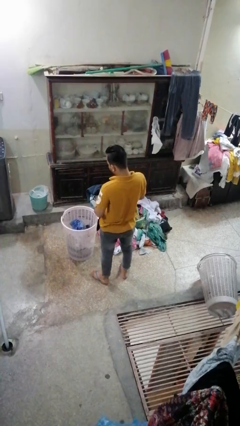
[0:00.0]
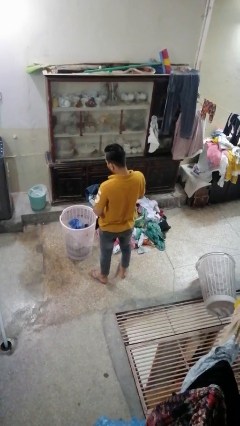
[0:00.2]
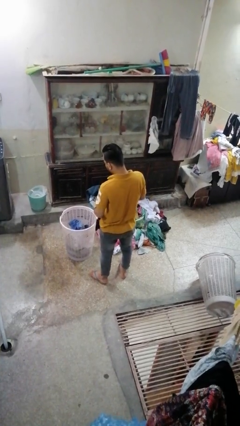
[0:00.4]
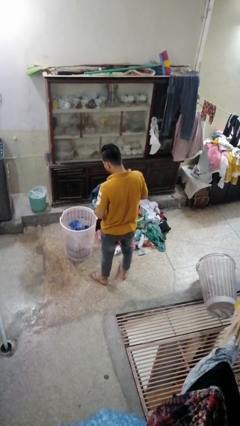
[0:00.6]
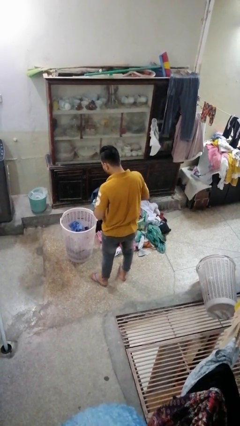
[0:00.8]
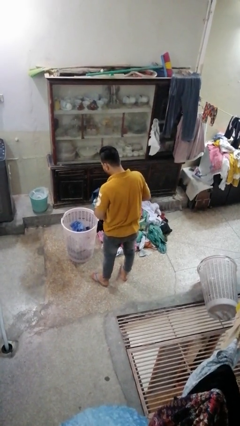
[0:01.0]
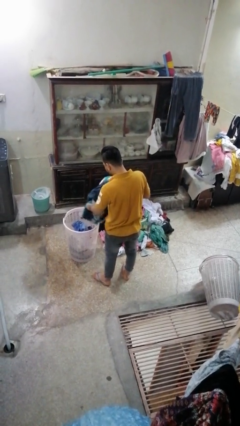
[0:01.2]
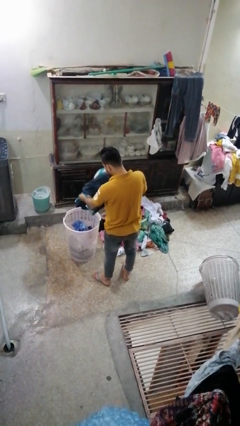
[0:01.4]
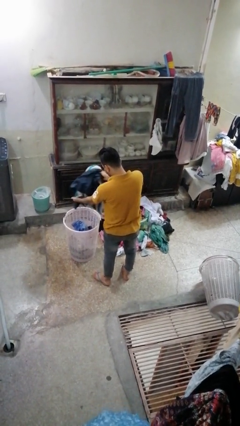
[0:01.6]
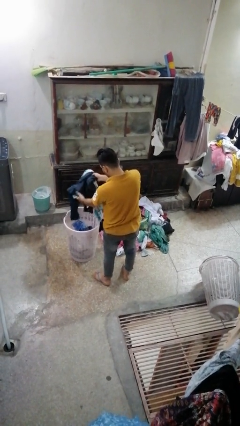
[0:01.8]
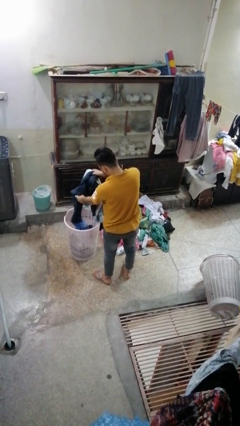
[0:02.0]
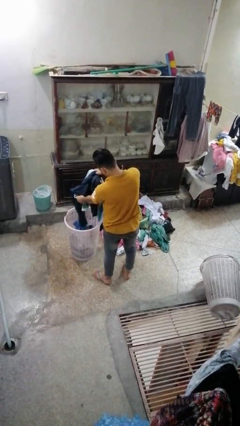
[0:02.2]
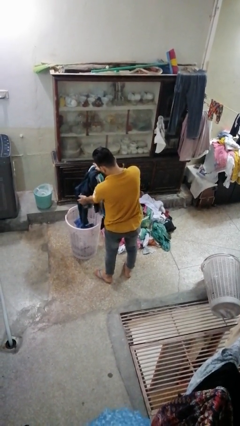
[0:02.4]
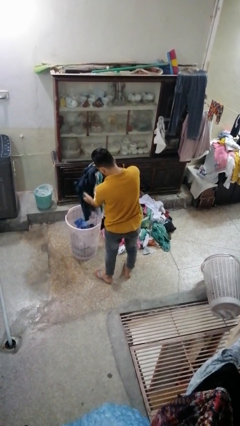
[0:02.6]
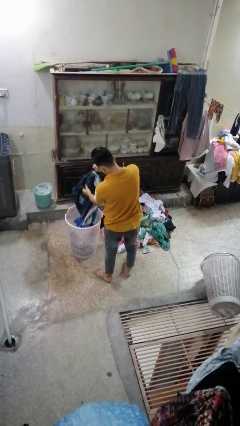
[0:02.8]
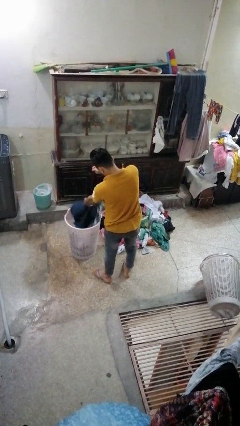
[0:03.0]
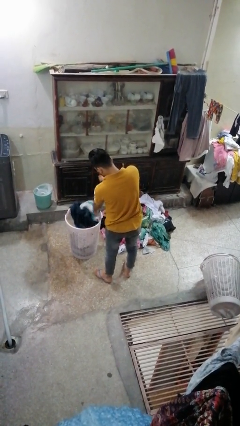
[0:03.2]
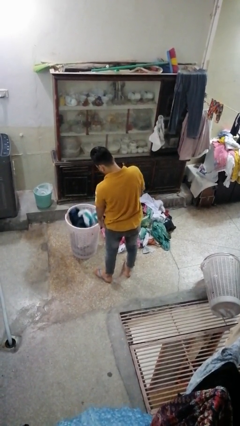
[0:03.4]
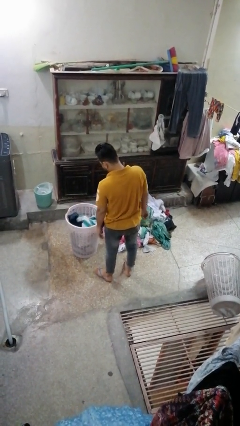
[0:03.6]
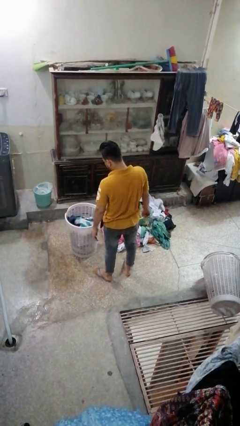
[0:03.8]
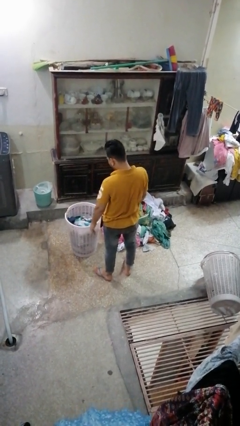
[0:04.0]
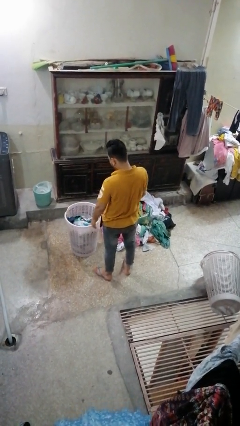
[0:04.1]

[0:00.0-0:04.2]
person puts object into basket

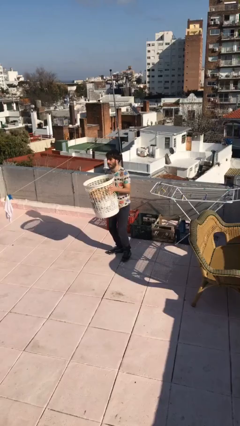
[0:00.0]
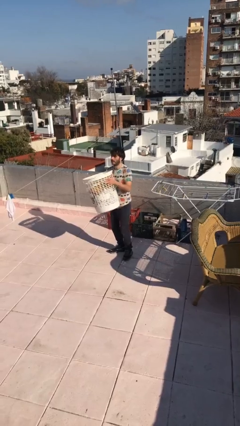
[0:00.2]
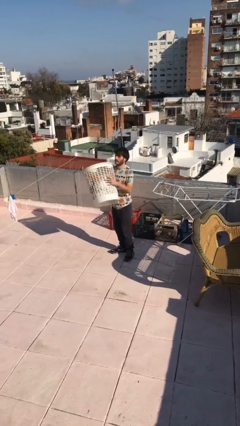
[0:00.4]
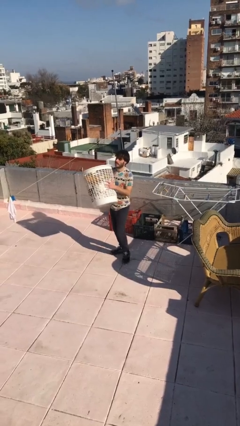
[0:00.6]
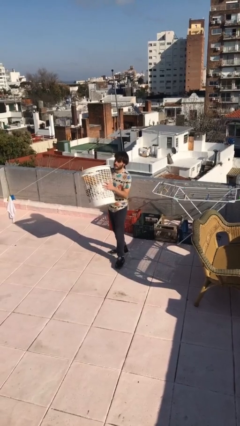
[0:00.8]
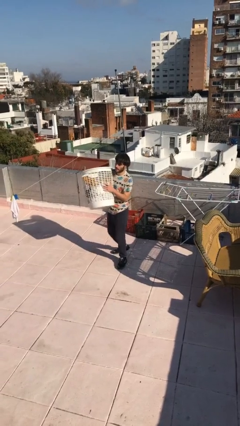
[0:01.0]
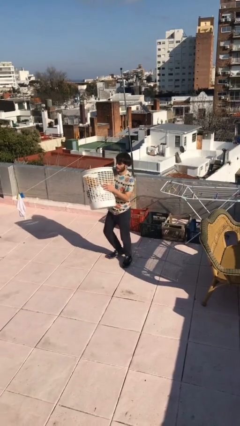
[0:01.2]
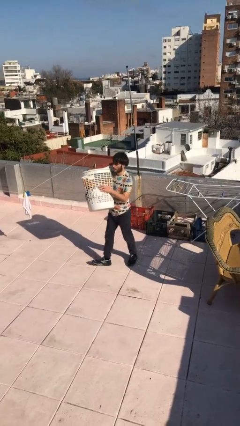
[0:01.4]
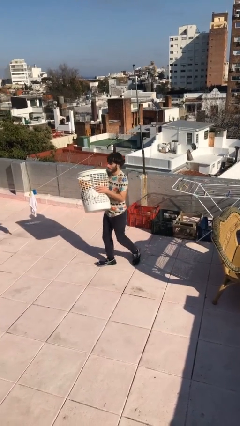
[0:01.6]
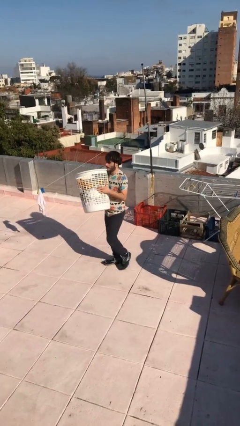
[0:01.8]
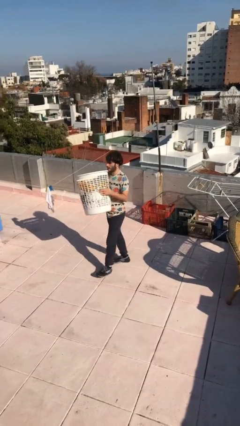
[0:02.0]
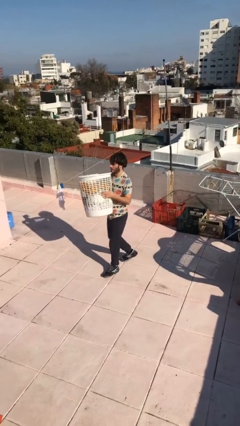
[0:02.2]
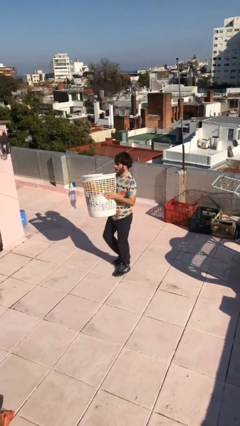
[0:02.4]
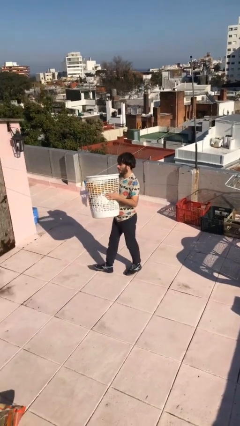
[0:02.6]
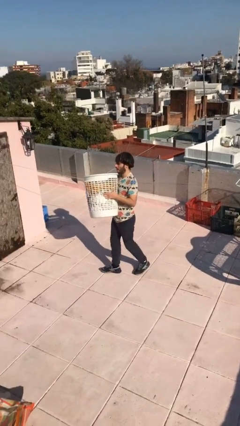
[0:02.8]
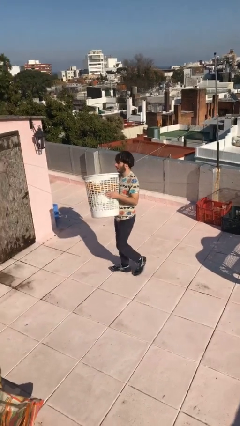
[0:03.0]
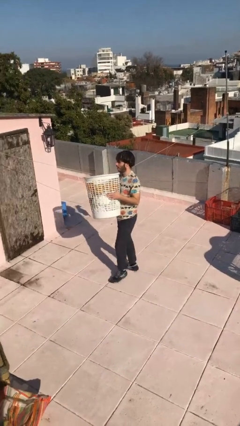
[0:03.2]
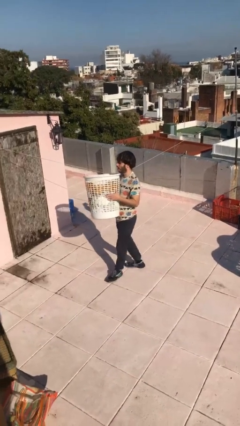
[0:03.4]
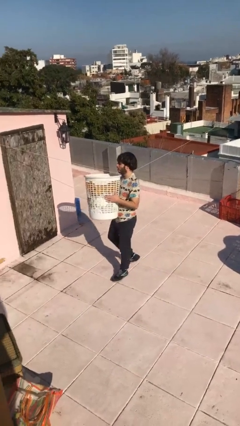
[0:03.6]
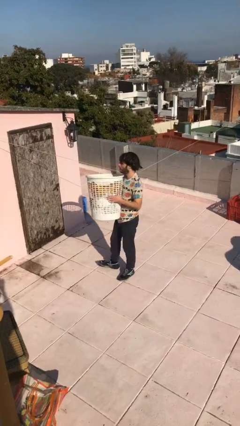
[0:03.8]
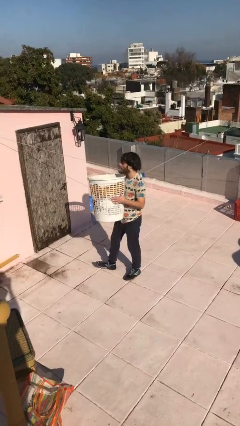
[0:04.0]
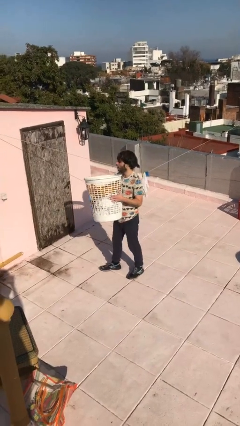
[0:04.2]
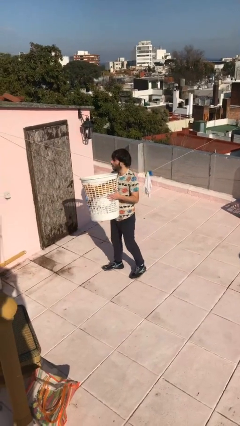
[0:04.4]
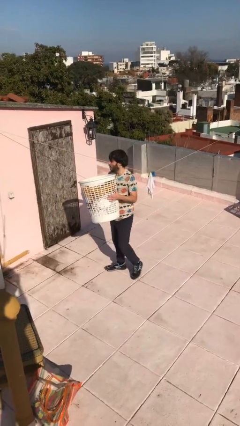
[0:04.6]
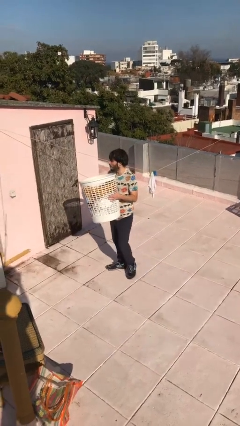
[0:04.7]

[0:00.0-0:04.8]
person carries laundry basket

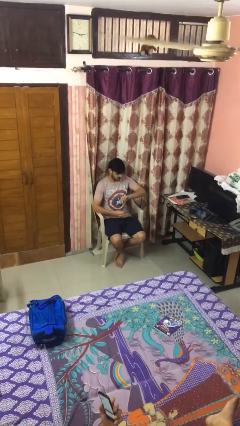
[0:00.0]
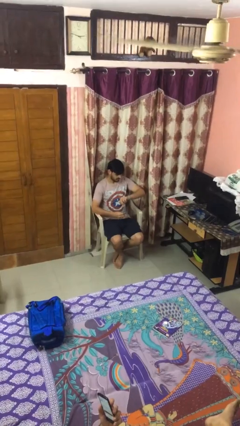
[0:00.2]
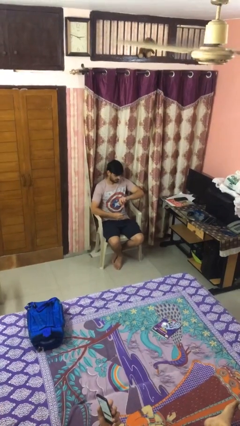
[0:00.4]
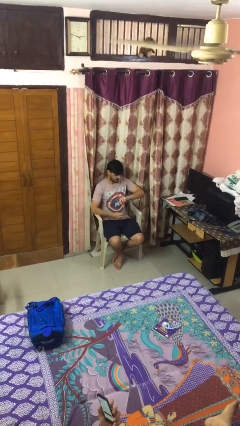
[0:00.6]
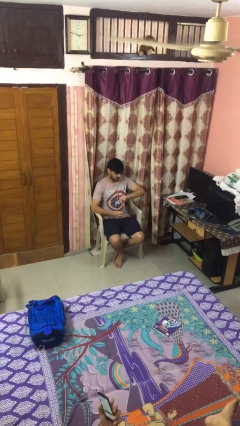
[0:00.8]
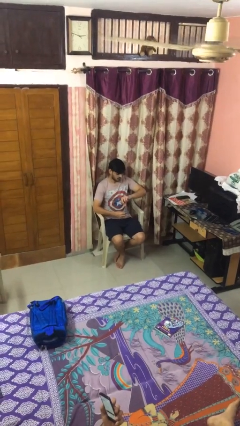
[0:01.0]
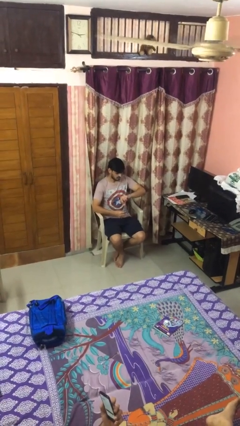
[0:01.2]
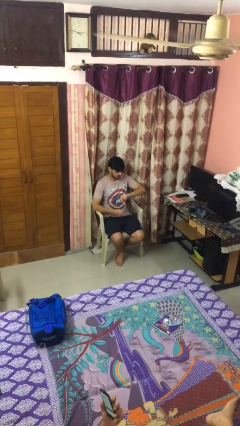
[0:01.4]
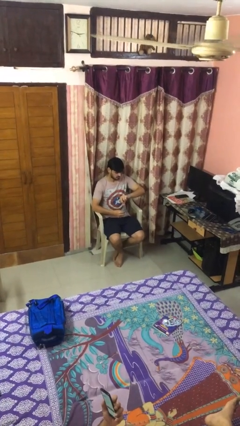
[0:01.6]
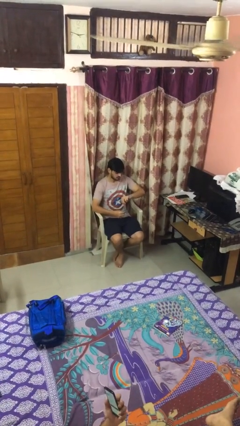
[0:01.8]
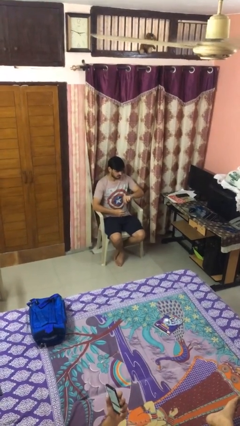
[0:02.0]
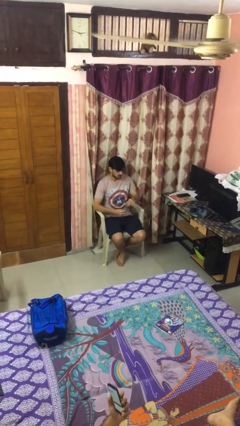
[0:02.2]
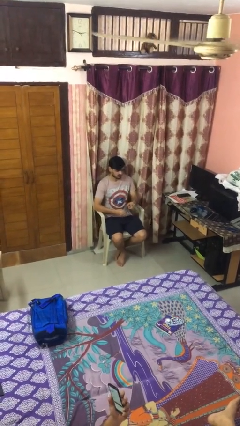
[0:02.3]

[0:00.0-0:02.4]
person looks at wristwatch

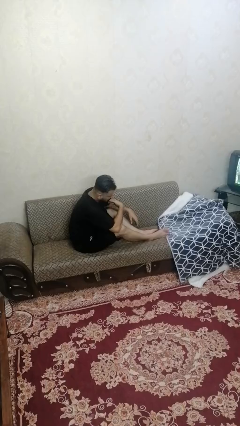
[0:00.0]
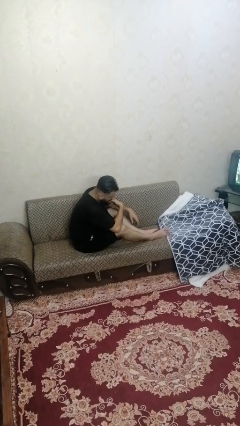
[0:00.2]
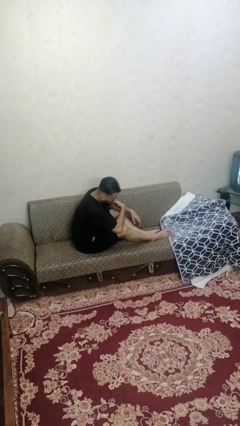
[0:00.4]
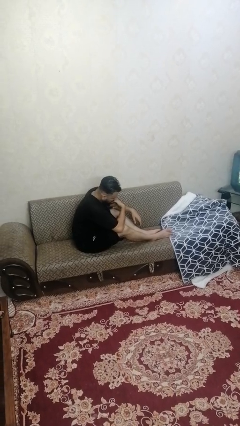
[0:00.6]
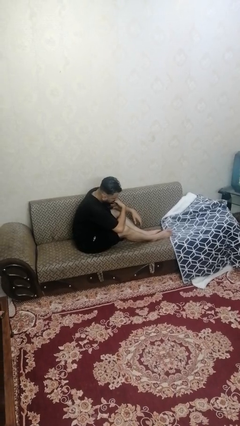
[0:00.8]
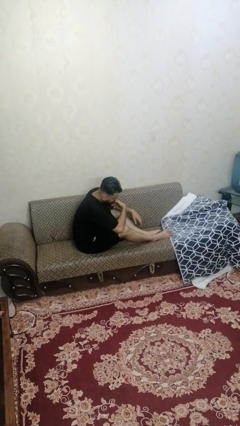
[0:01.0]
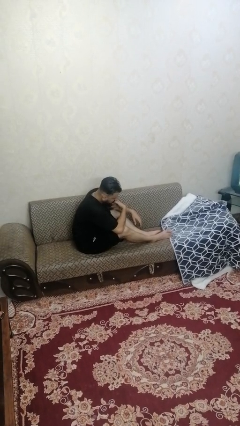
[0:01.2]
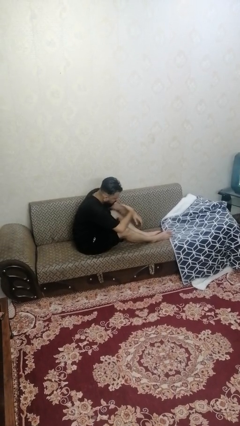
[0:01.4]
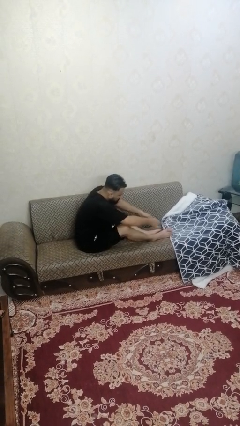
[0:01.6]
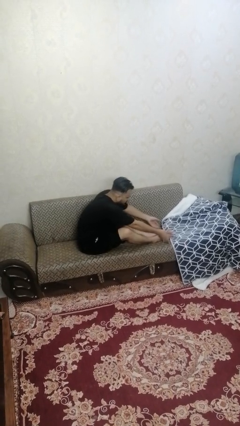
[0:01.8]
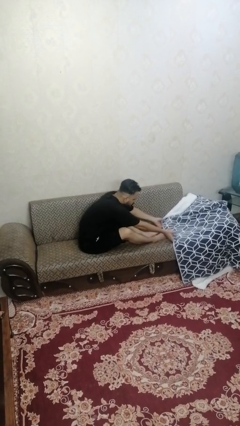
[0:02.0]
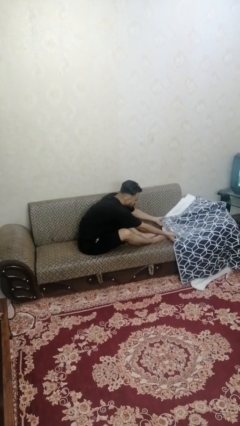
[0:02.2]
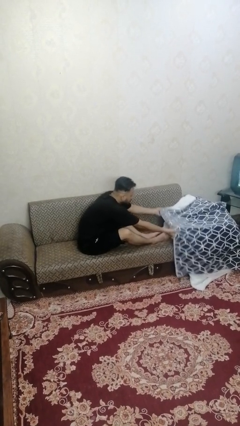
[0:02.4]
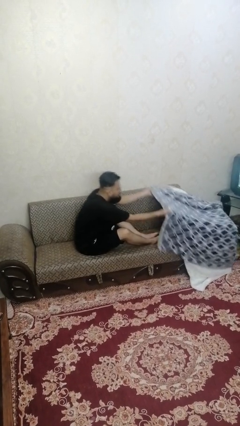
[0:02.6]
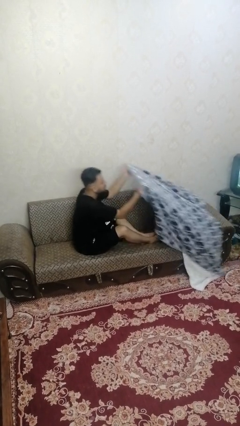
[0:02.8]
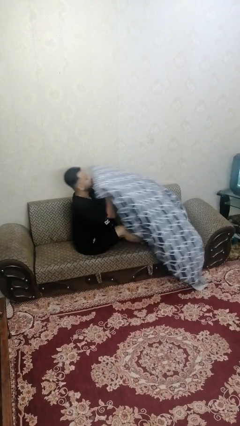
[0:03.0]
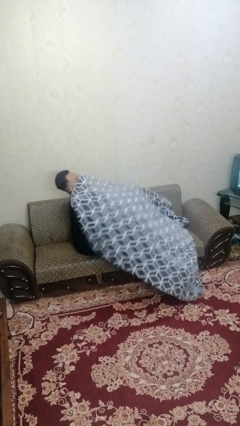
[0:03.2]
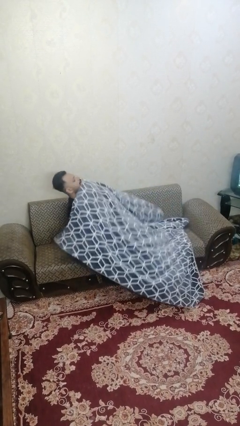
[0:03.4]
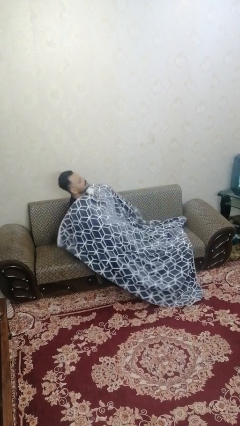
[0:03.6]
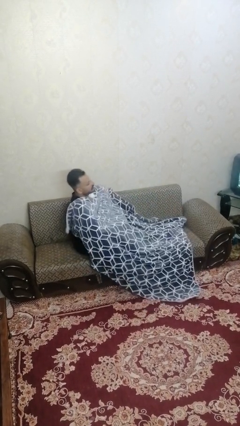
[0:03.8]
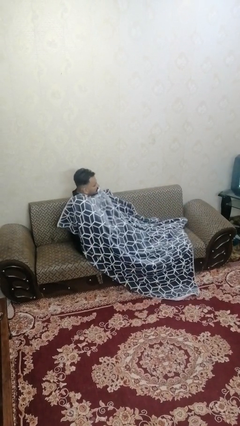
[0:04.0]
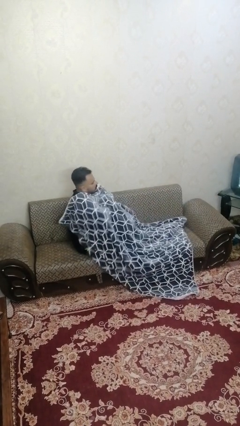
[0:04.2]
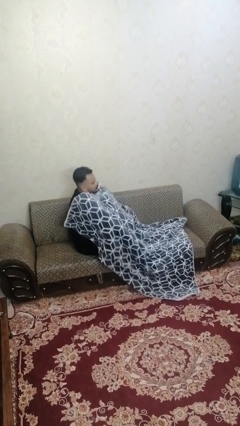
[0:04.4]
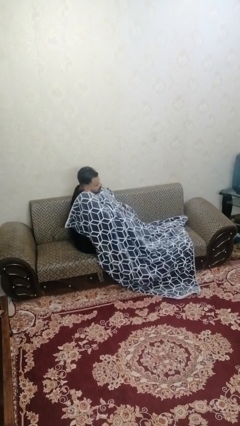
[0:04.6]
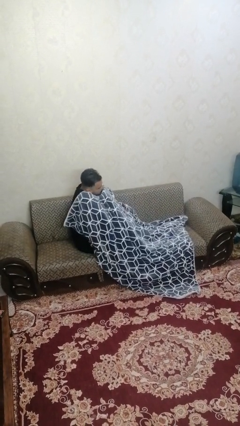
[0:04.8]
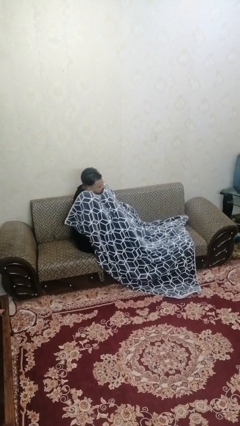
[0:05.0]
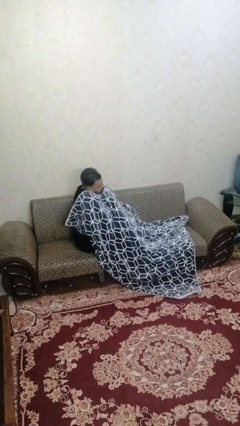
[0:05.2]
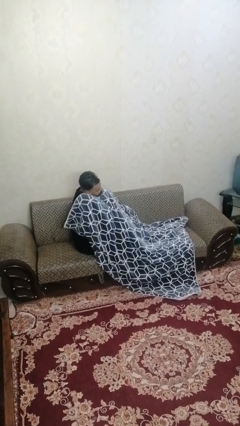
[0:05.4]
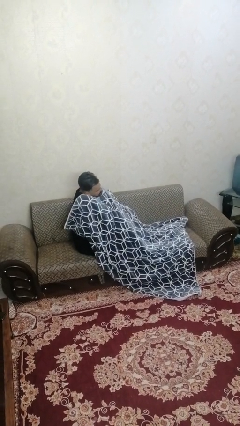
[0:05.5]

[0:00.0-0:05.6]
person covers with blanket

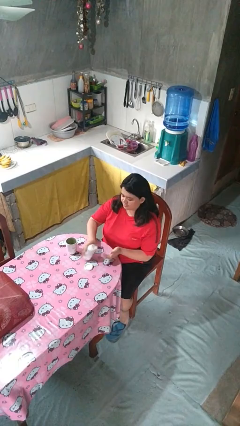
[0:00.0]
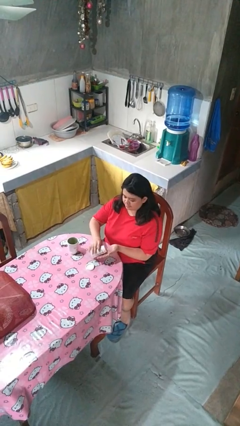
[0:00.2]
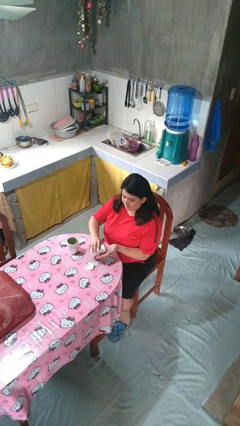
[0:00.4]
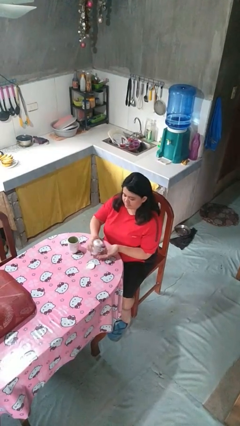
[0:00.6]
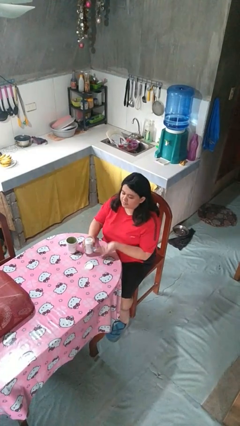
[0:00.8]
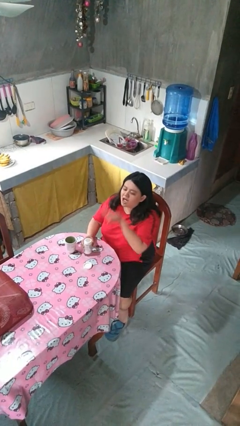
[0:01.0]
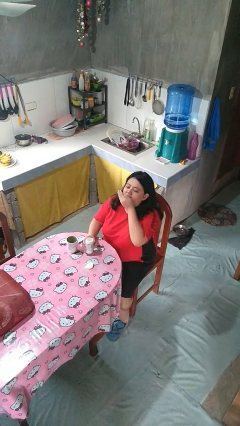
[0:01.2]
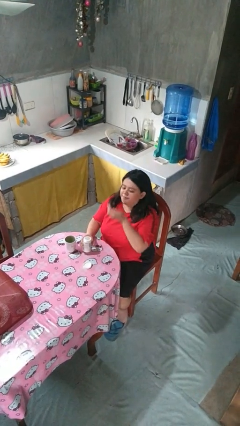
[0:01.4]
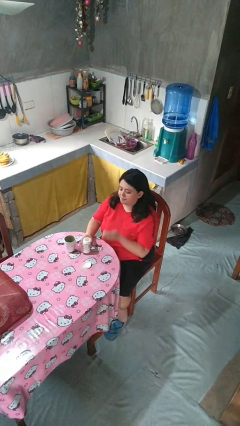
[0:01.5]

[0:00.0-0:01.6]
person takes medicine pills
